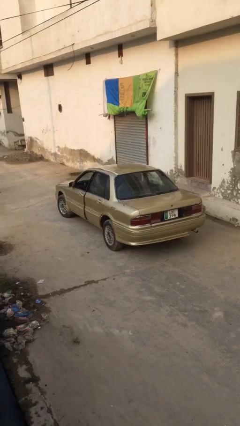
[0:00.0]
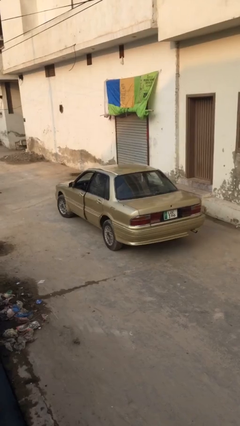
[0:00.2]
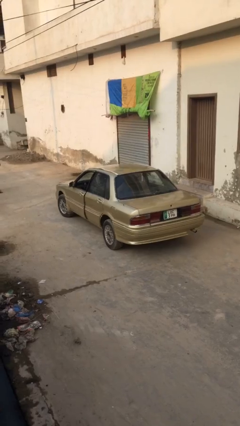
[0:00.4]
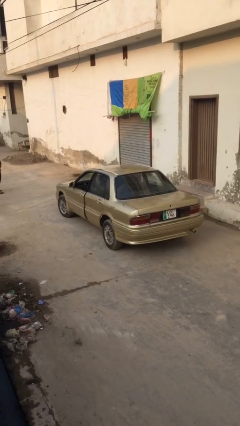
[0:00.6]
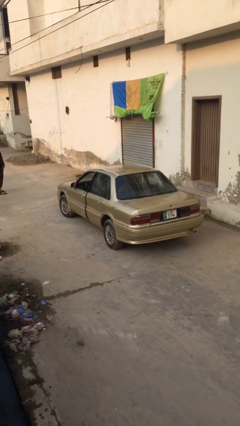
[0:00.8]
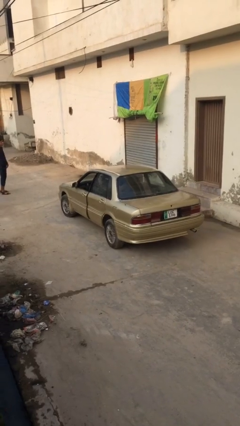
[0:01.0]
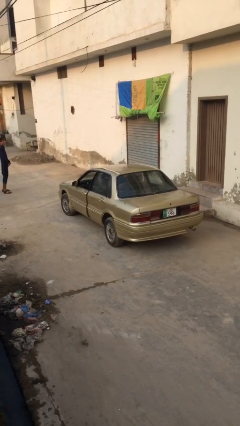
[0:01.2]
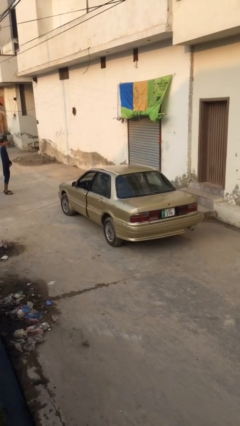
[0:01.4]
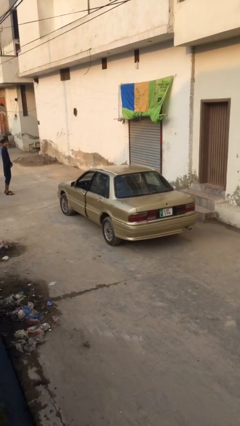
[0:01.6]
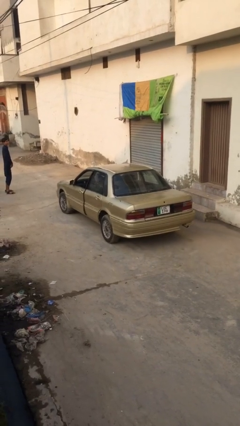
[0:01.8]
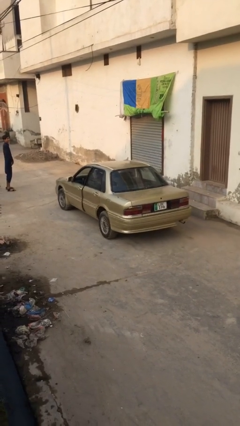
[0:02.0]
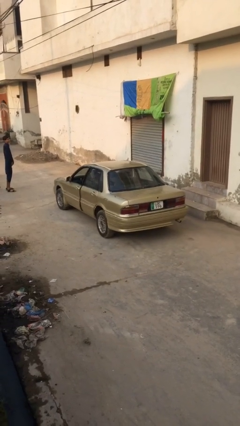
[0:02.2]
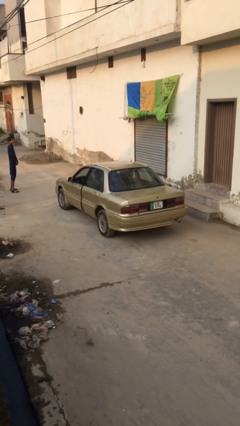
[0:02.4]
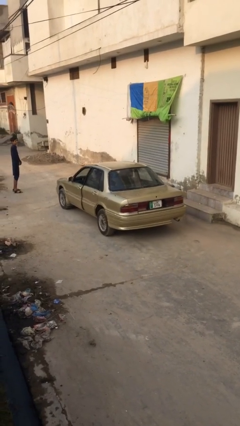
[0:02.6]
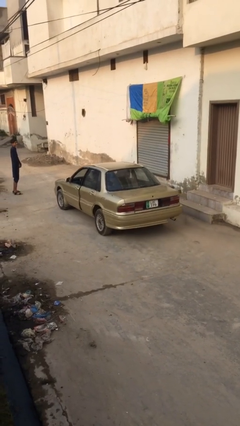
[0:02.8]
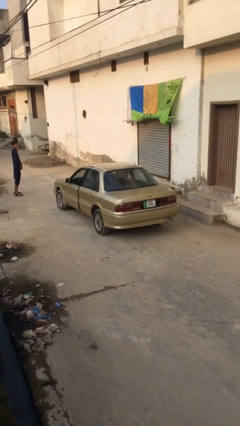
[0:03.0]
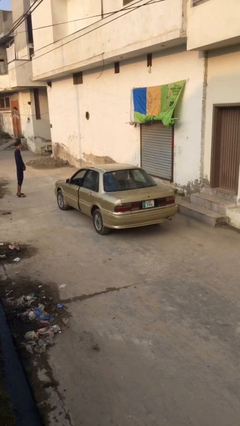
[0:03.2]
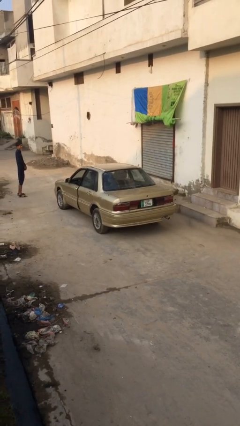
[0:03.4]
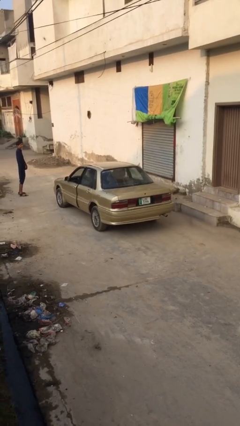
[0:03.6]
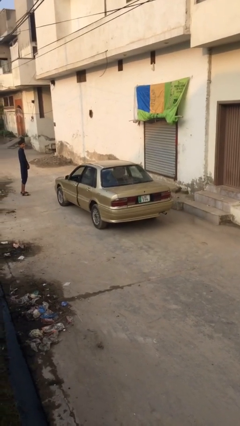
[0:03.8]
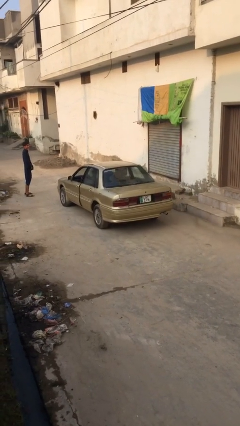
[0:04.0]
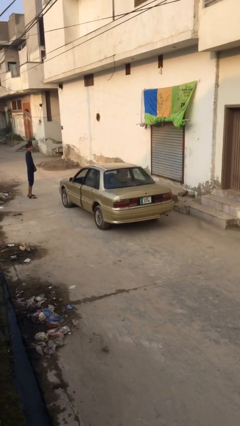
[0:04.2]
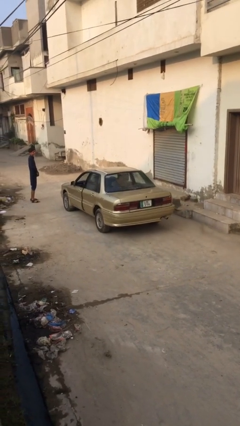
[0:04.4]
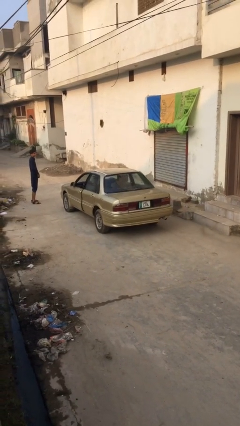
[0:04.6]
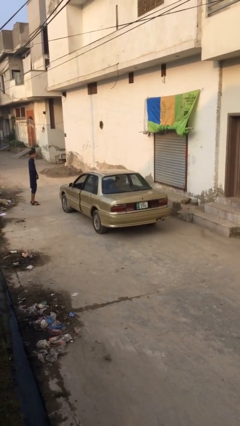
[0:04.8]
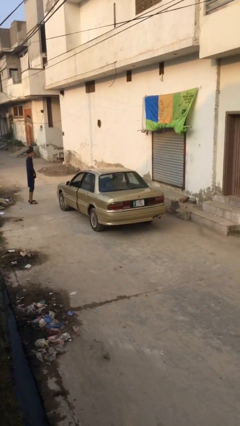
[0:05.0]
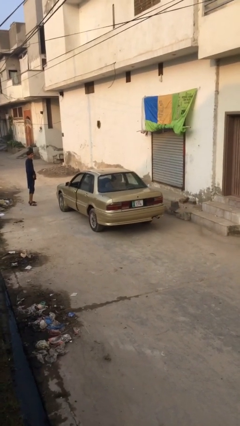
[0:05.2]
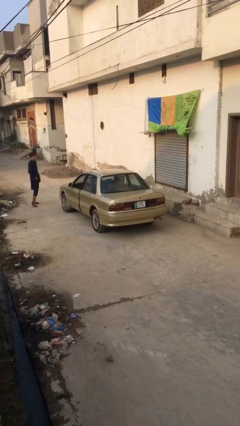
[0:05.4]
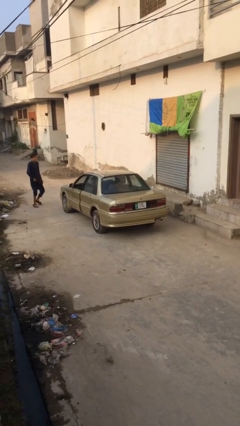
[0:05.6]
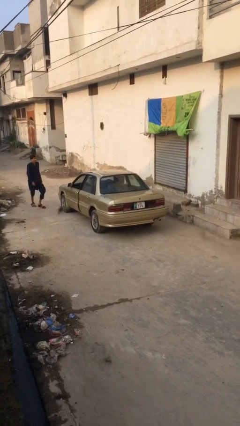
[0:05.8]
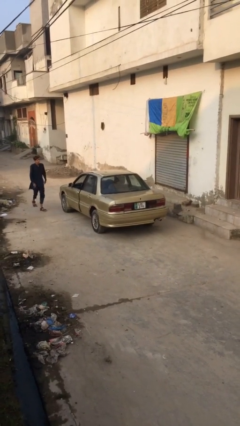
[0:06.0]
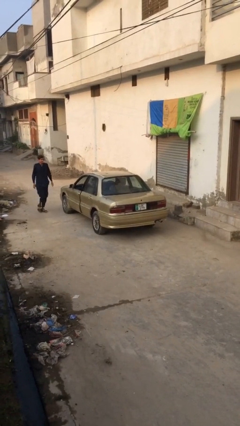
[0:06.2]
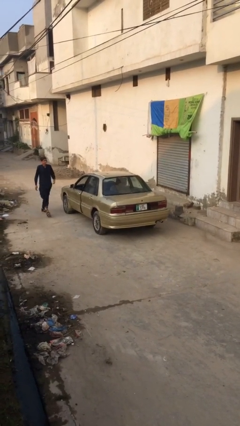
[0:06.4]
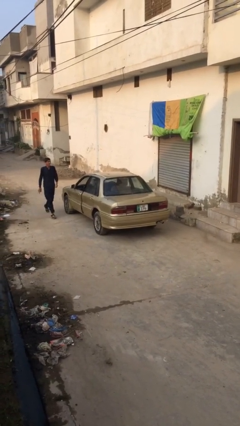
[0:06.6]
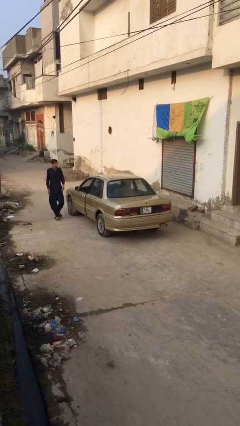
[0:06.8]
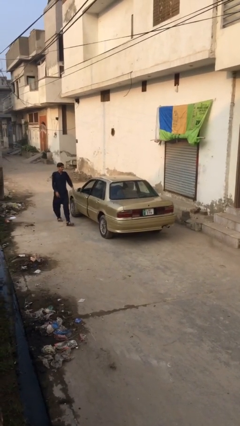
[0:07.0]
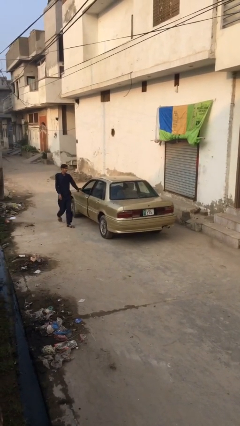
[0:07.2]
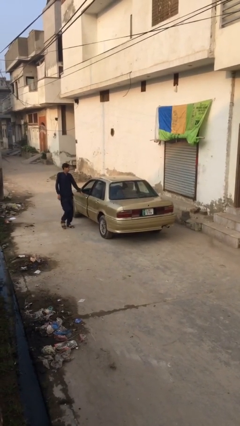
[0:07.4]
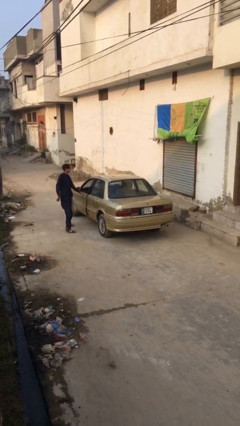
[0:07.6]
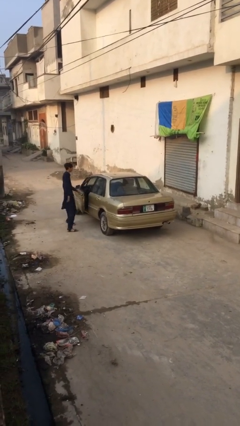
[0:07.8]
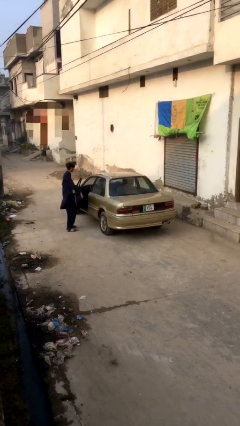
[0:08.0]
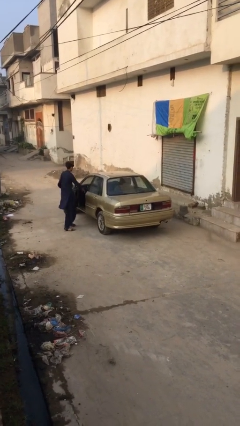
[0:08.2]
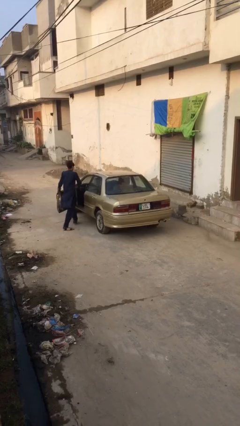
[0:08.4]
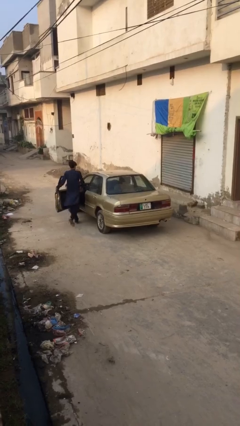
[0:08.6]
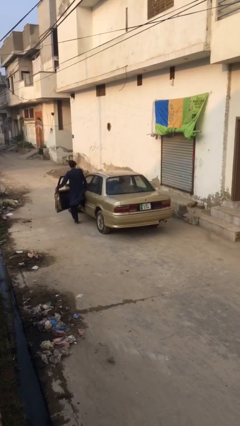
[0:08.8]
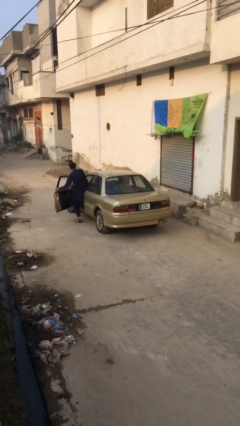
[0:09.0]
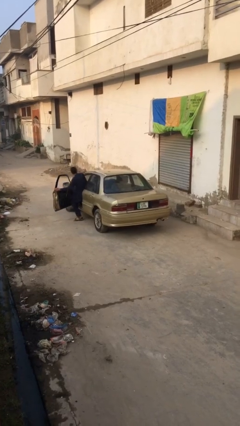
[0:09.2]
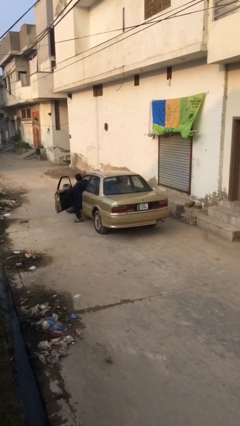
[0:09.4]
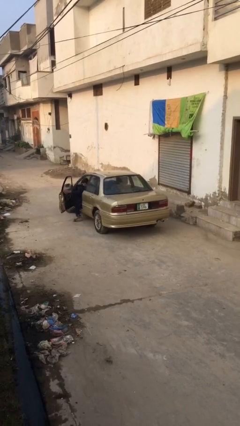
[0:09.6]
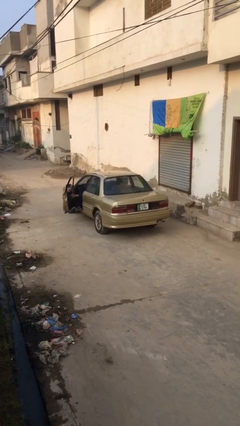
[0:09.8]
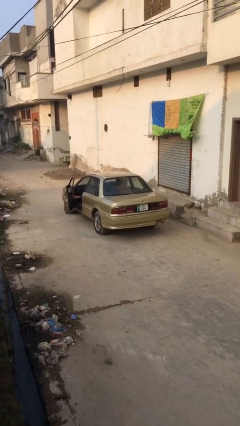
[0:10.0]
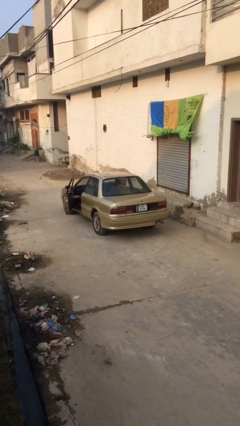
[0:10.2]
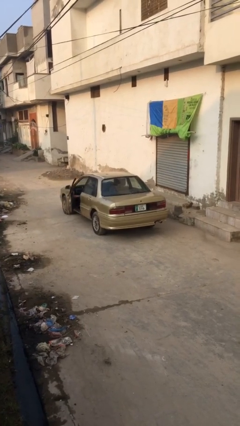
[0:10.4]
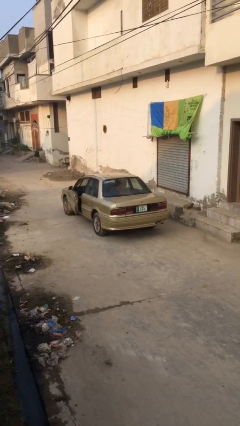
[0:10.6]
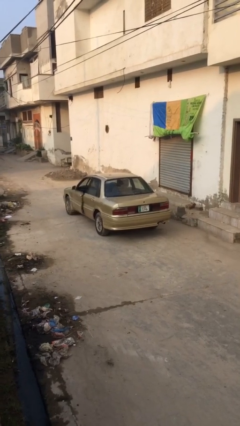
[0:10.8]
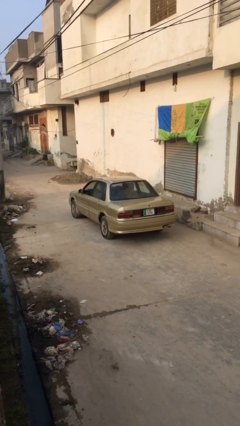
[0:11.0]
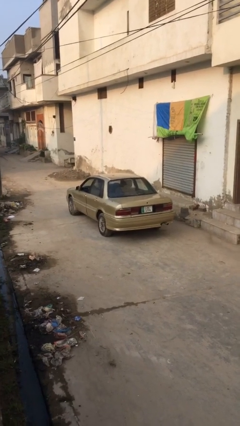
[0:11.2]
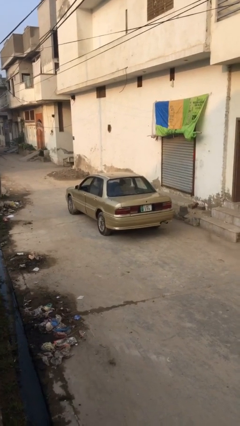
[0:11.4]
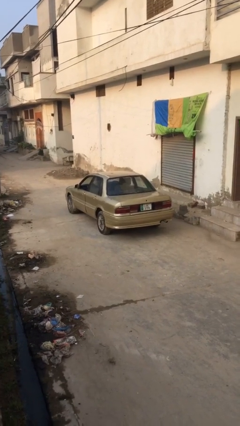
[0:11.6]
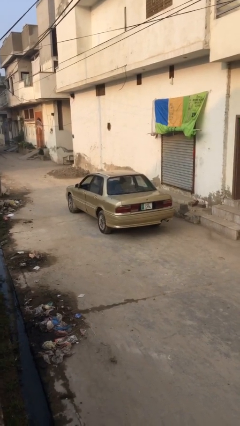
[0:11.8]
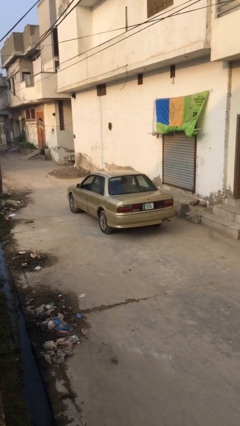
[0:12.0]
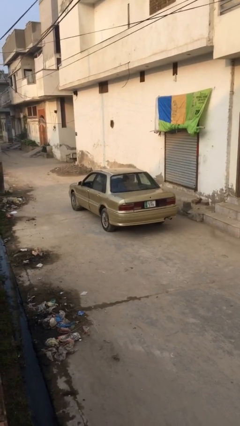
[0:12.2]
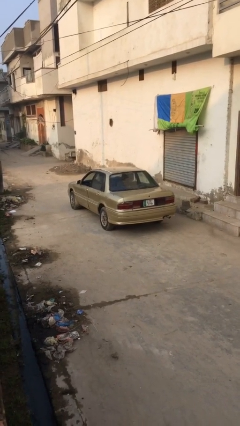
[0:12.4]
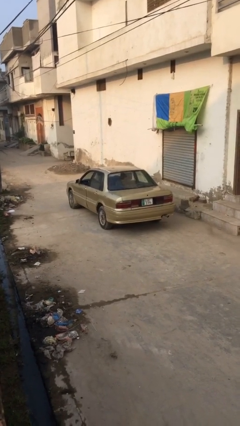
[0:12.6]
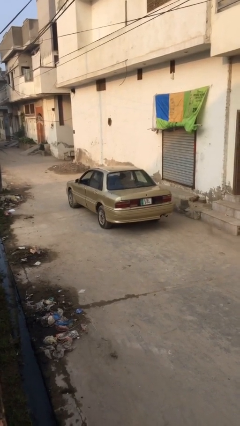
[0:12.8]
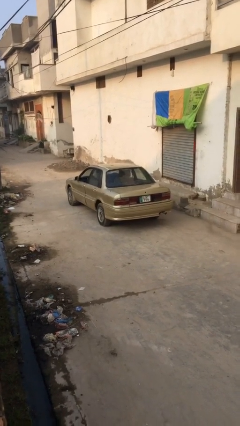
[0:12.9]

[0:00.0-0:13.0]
car picks up person

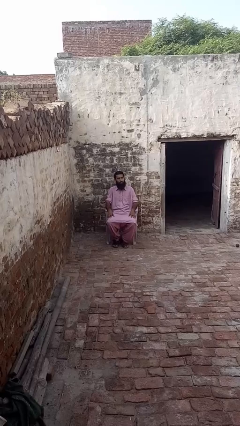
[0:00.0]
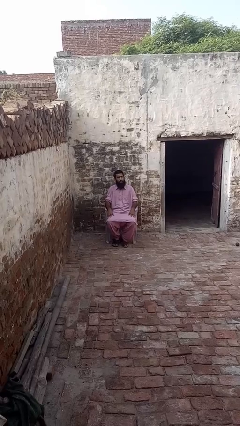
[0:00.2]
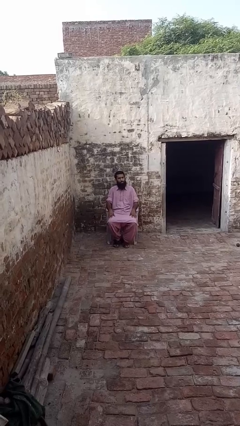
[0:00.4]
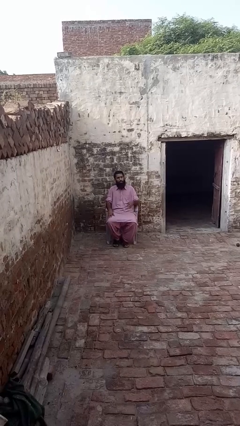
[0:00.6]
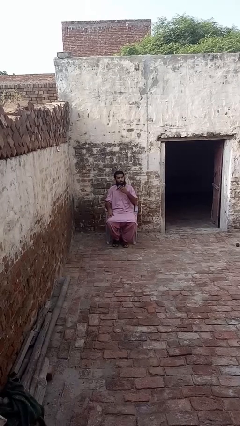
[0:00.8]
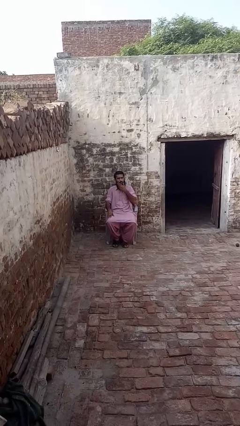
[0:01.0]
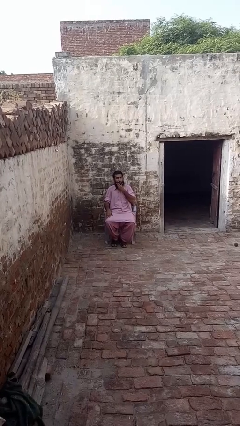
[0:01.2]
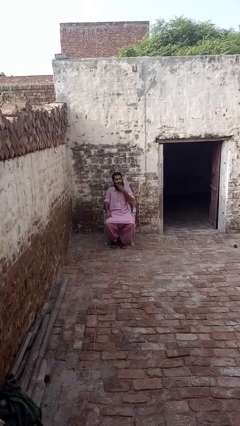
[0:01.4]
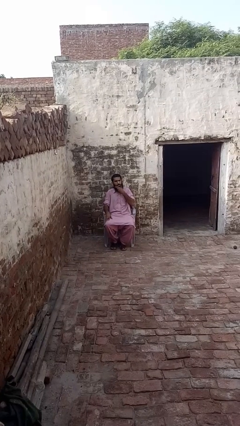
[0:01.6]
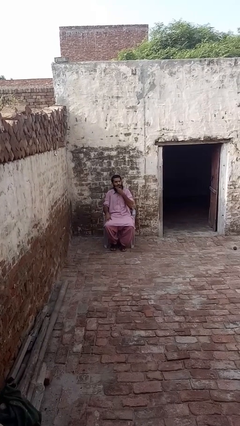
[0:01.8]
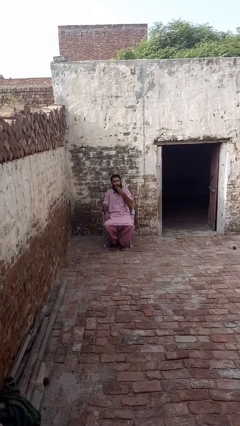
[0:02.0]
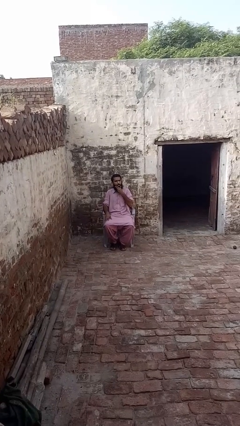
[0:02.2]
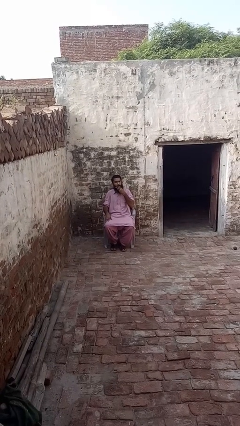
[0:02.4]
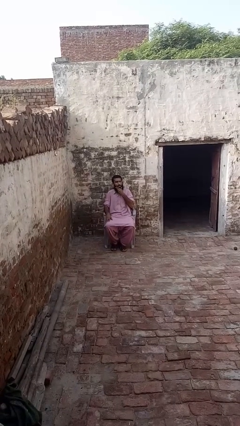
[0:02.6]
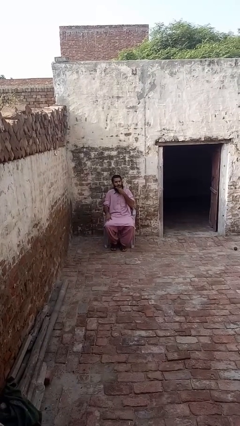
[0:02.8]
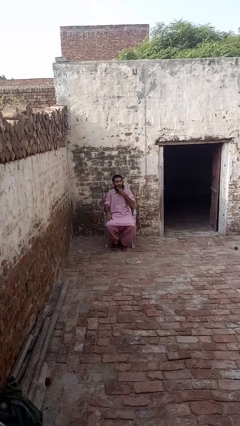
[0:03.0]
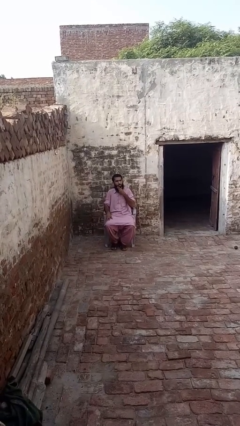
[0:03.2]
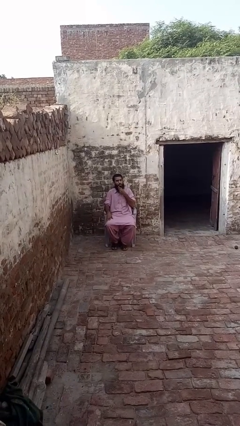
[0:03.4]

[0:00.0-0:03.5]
person strokes chin

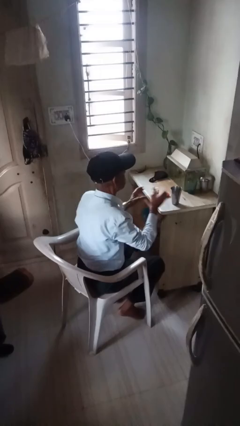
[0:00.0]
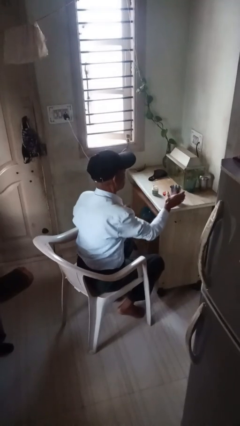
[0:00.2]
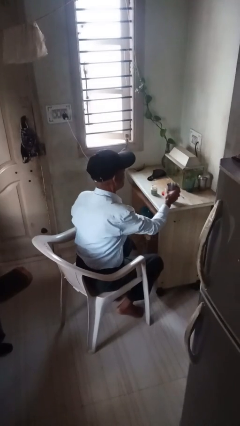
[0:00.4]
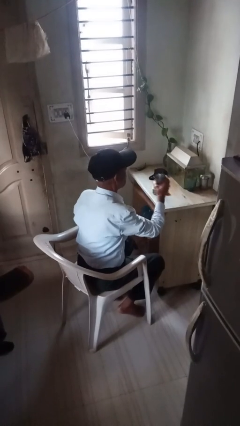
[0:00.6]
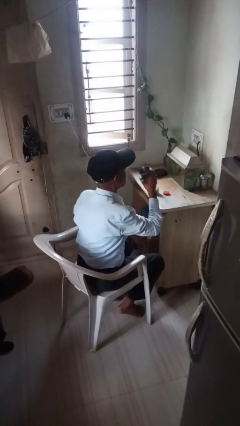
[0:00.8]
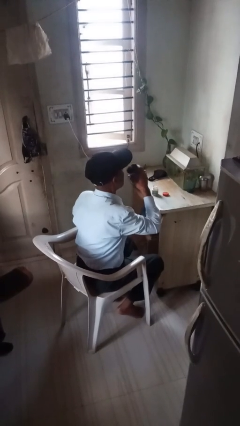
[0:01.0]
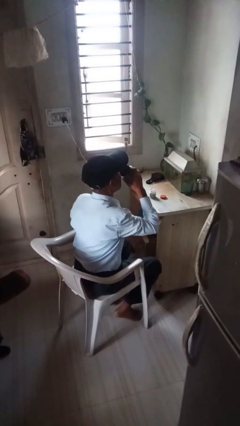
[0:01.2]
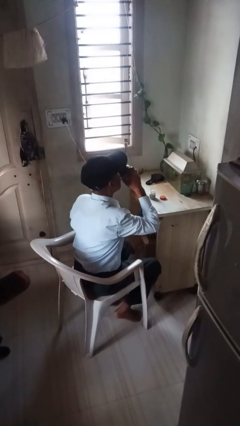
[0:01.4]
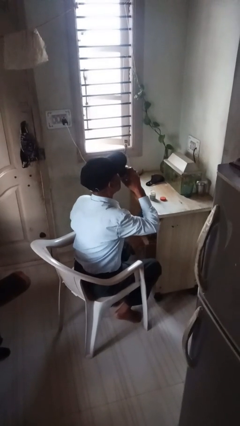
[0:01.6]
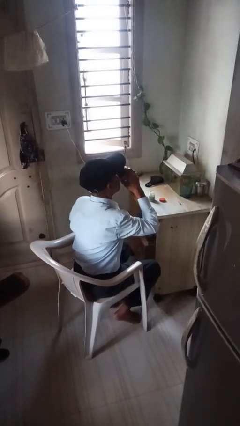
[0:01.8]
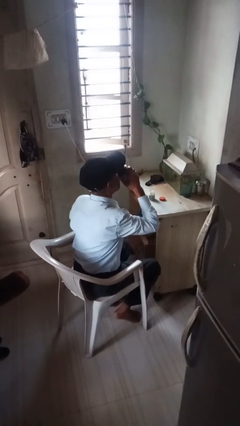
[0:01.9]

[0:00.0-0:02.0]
person drinks from cup
